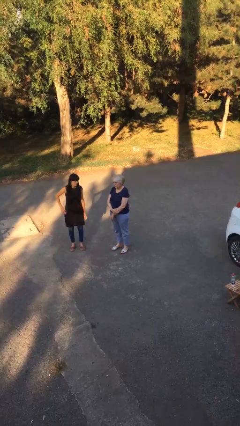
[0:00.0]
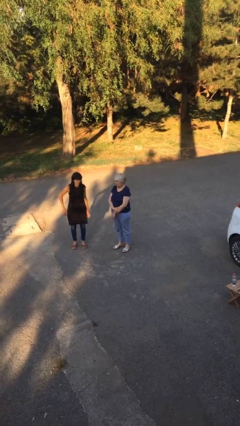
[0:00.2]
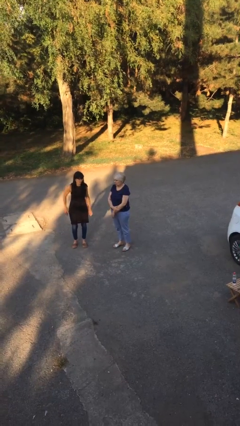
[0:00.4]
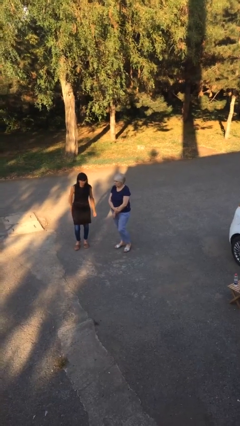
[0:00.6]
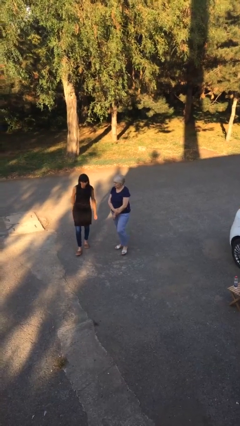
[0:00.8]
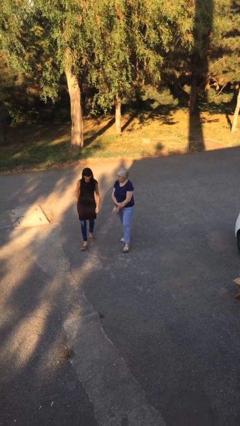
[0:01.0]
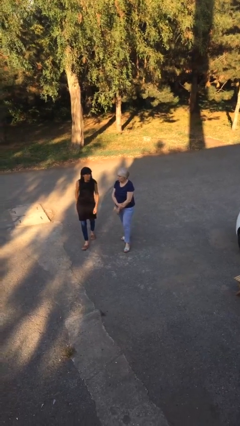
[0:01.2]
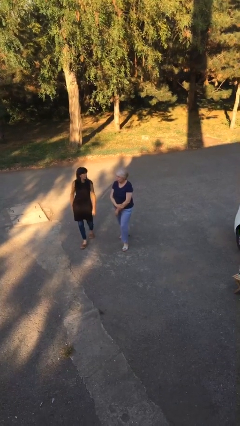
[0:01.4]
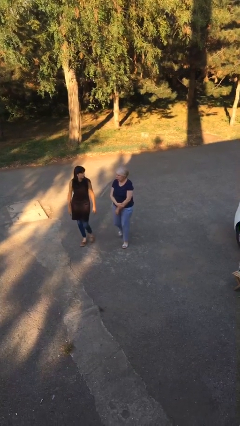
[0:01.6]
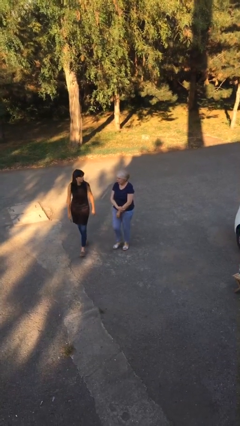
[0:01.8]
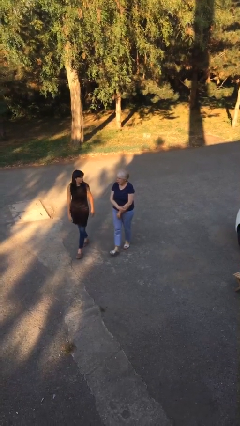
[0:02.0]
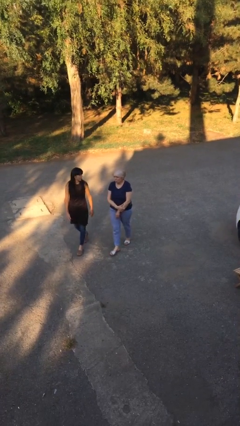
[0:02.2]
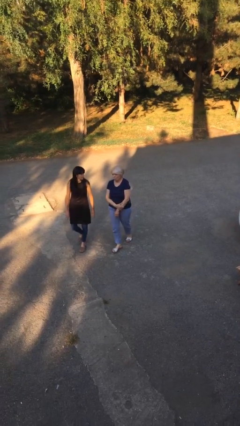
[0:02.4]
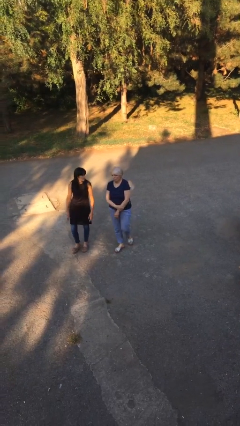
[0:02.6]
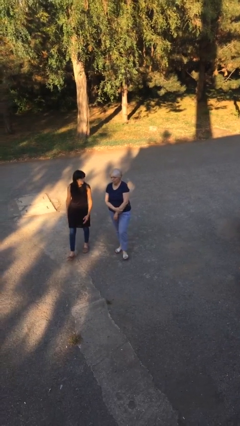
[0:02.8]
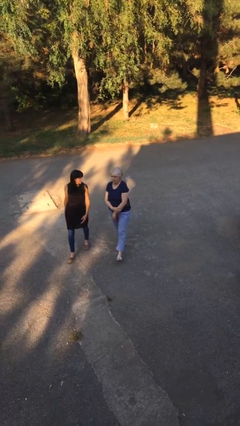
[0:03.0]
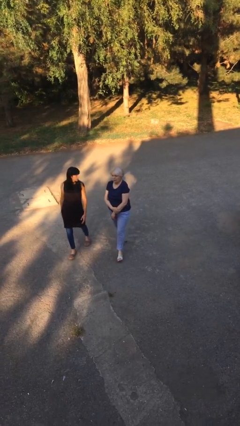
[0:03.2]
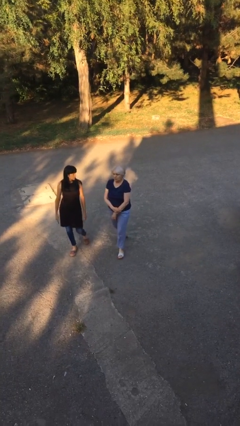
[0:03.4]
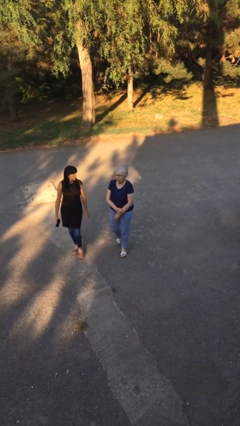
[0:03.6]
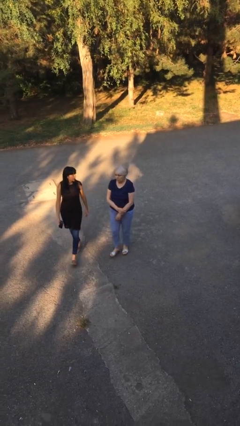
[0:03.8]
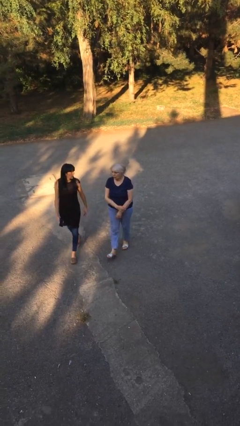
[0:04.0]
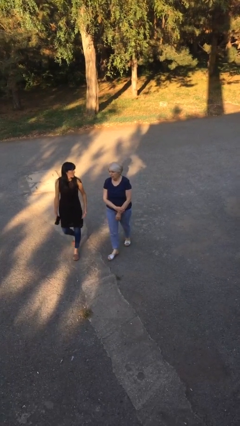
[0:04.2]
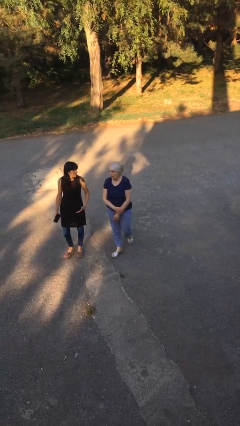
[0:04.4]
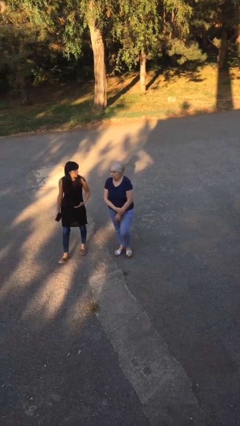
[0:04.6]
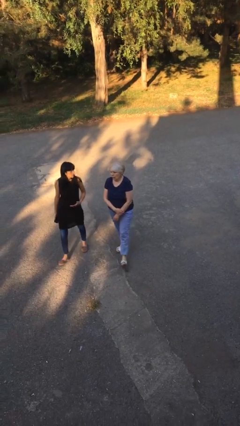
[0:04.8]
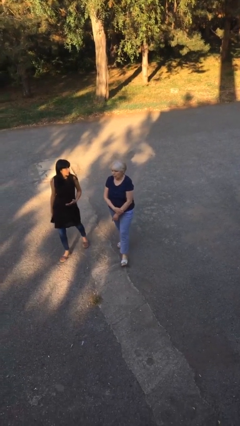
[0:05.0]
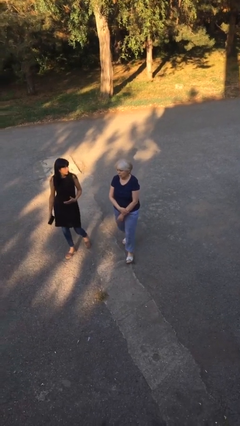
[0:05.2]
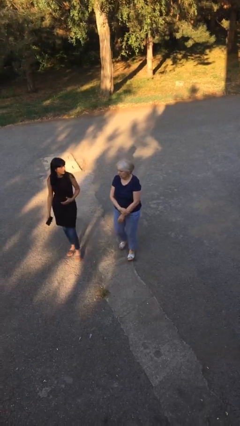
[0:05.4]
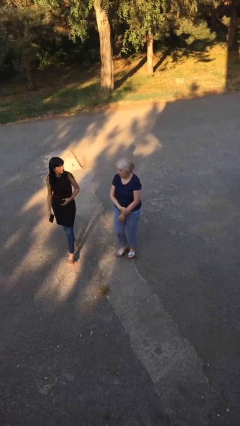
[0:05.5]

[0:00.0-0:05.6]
person talks to person

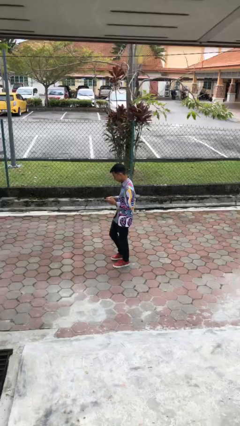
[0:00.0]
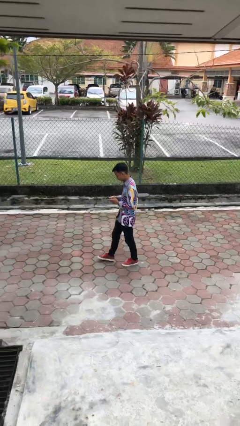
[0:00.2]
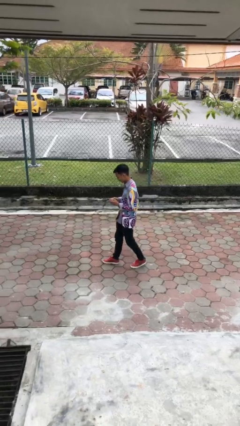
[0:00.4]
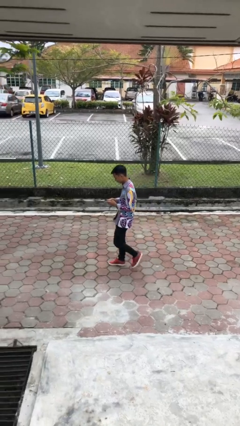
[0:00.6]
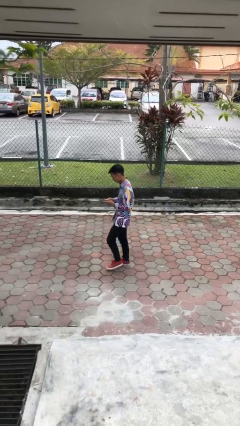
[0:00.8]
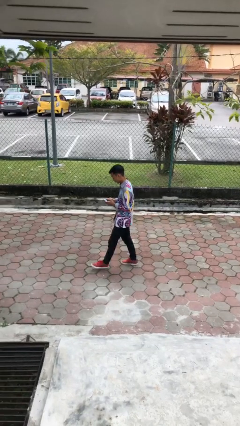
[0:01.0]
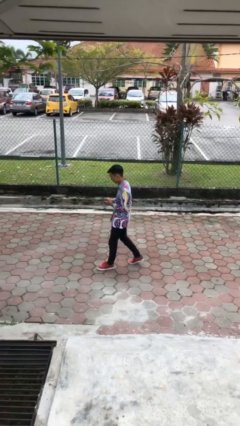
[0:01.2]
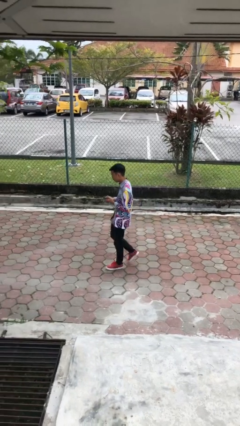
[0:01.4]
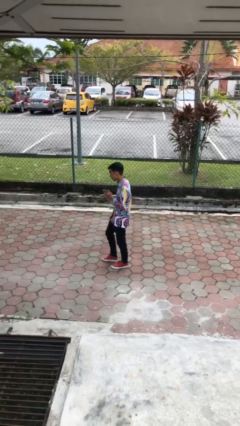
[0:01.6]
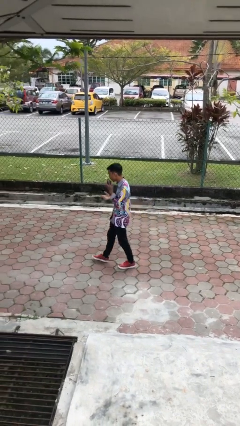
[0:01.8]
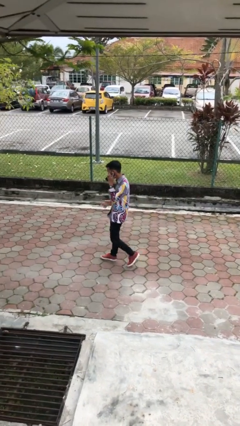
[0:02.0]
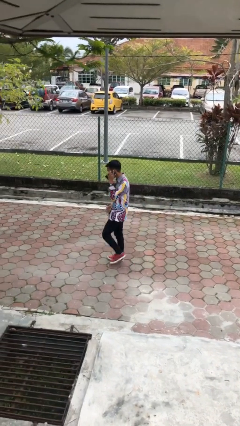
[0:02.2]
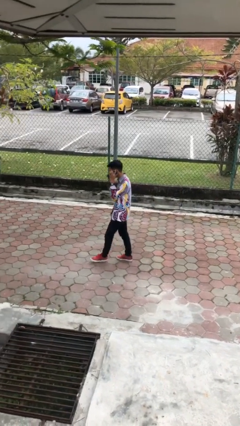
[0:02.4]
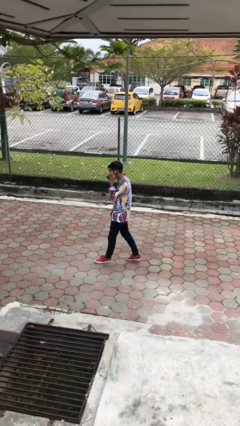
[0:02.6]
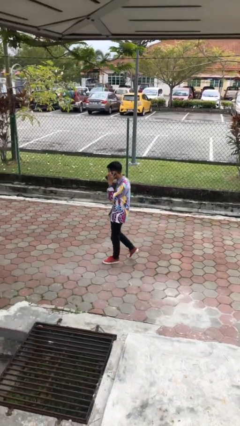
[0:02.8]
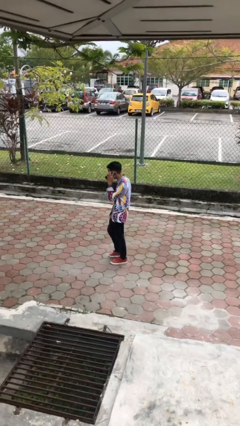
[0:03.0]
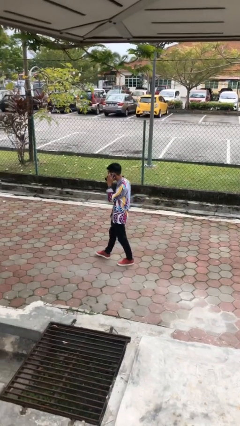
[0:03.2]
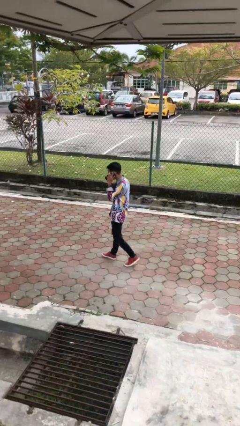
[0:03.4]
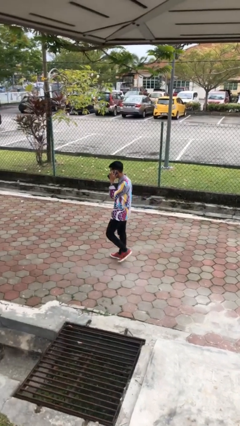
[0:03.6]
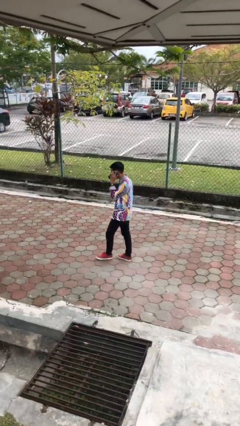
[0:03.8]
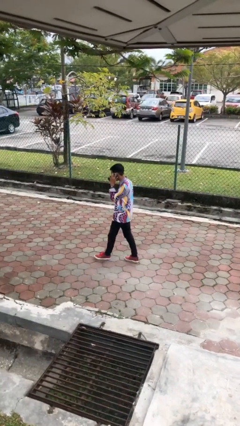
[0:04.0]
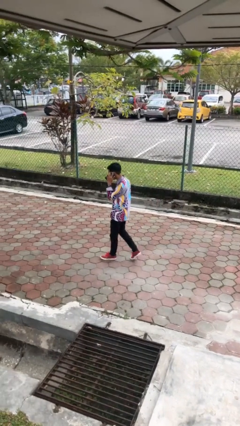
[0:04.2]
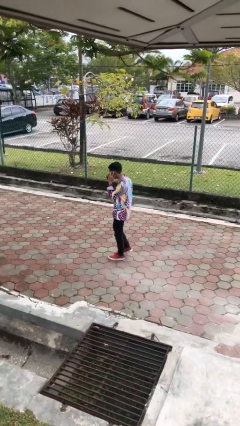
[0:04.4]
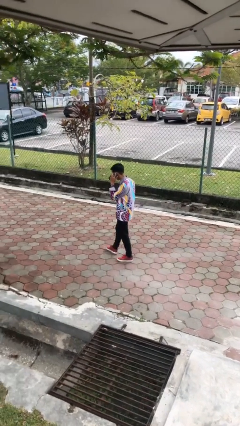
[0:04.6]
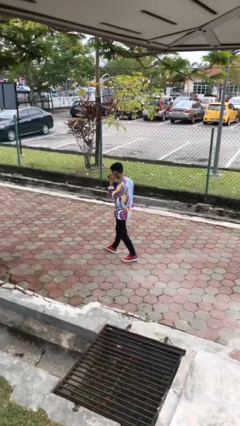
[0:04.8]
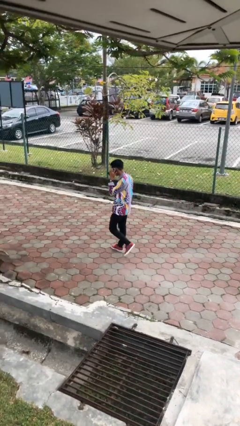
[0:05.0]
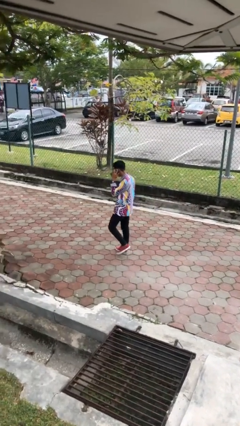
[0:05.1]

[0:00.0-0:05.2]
person talks on phone

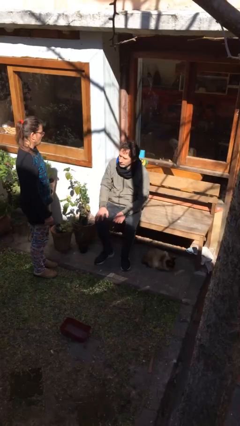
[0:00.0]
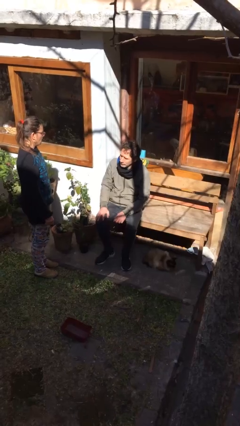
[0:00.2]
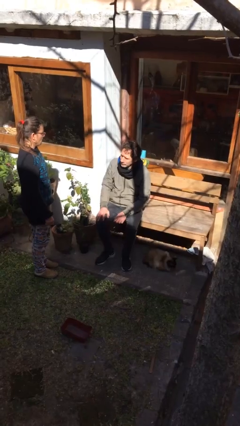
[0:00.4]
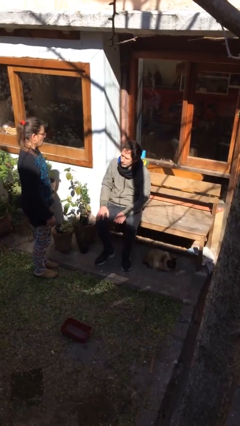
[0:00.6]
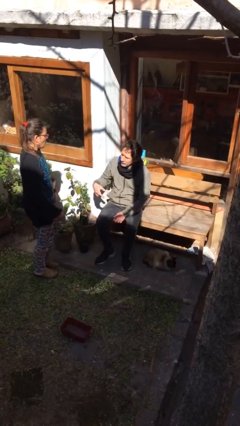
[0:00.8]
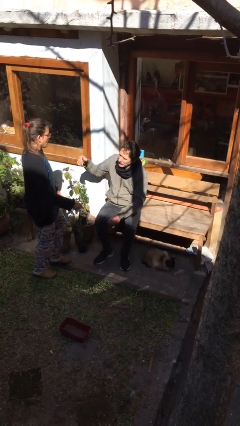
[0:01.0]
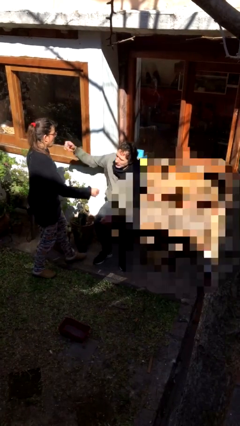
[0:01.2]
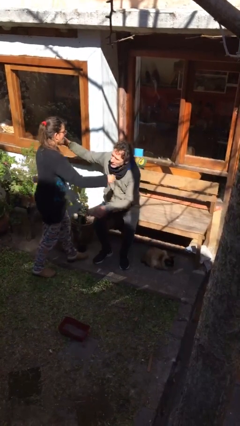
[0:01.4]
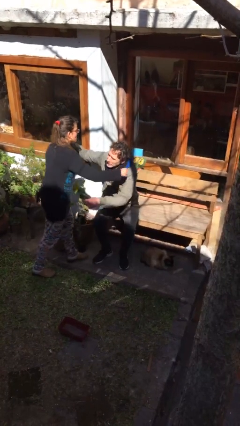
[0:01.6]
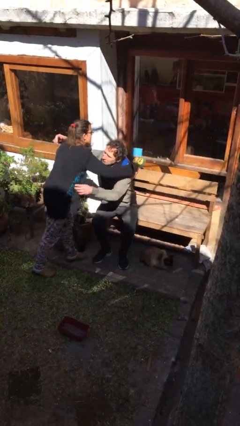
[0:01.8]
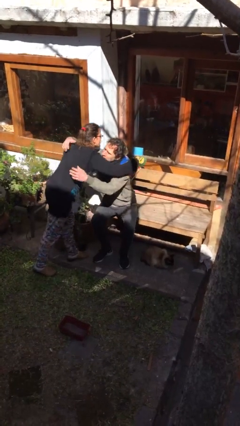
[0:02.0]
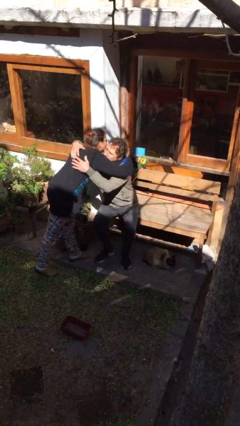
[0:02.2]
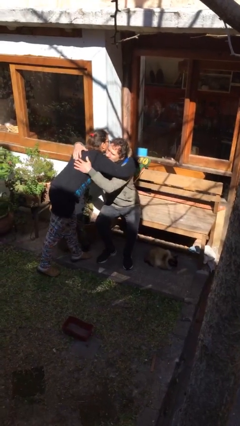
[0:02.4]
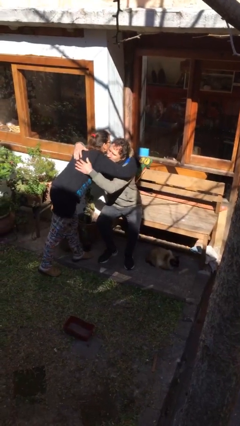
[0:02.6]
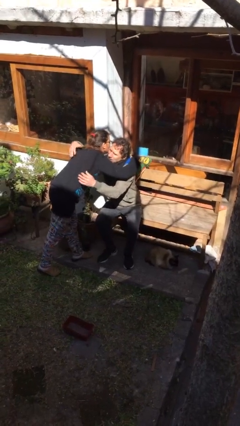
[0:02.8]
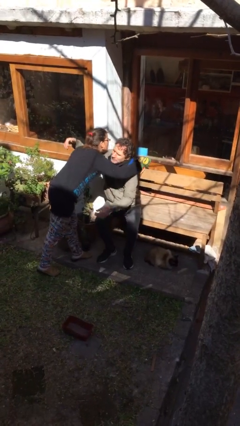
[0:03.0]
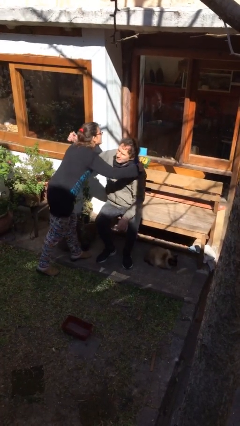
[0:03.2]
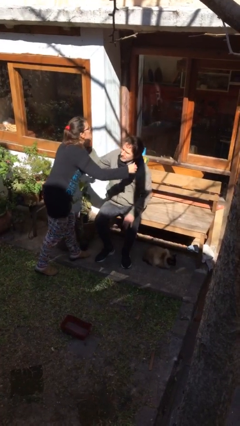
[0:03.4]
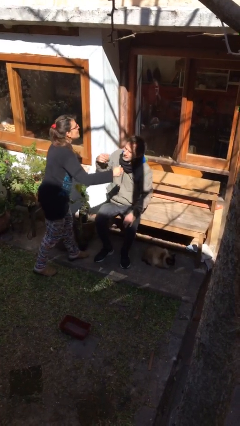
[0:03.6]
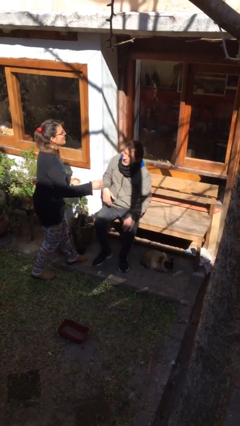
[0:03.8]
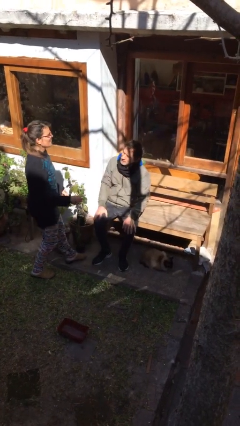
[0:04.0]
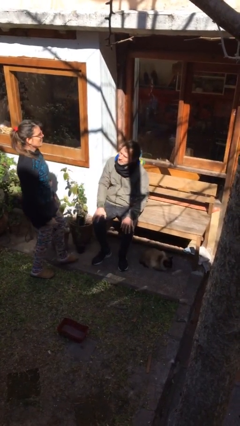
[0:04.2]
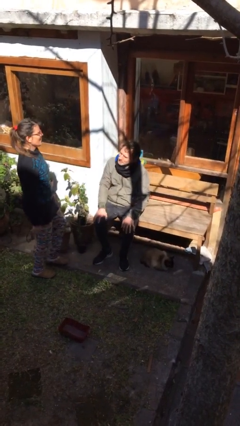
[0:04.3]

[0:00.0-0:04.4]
person embraces person

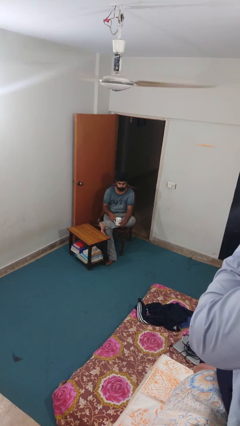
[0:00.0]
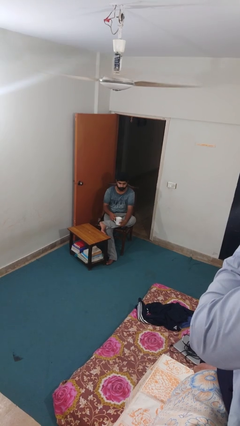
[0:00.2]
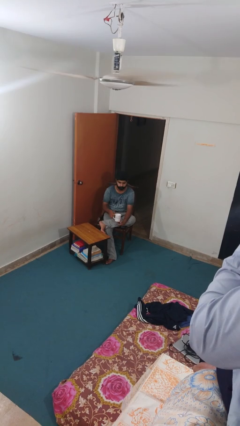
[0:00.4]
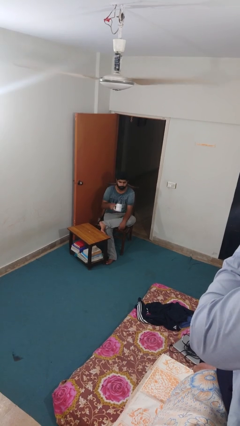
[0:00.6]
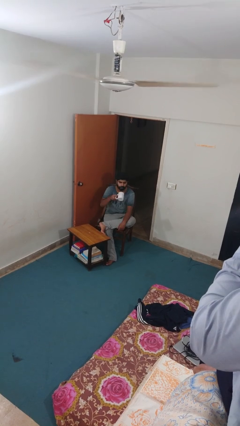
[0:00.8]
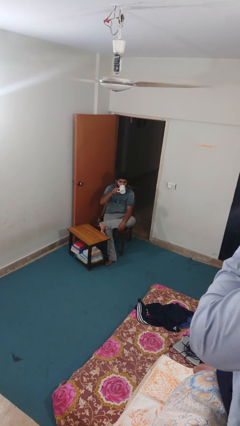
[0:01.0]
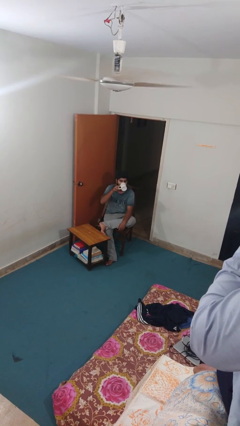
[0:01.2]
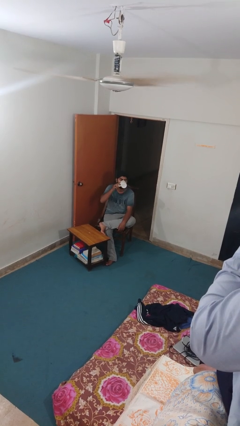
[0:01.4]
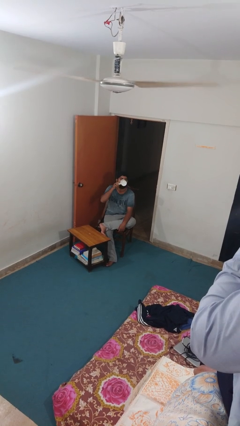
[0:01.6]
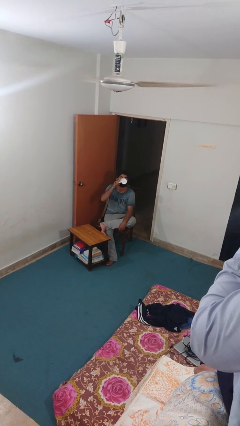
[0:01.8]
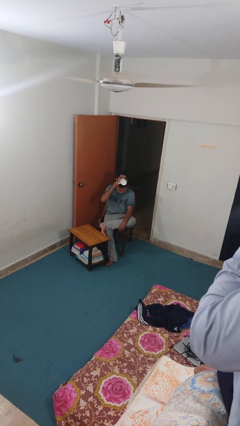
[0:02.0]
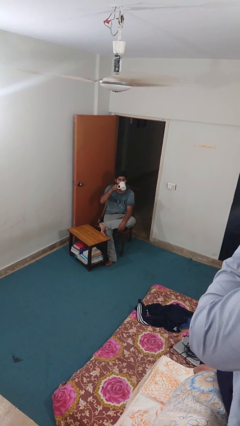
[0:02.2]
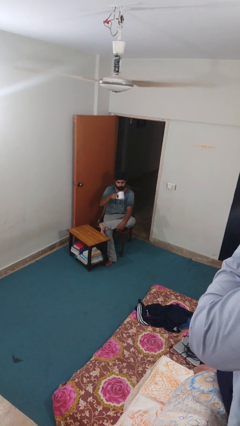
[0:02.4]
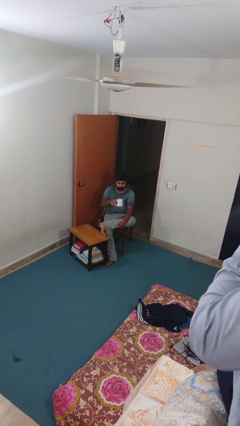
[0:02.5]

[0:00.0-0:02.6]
person drinks from mug
